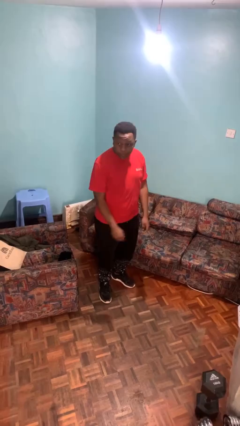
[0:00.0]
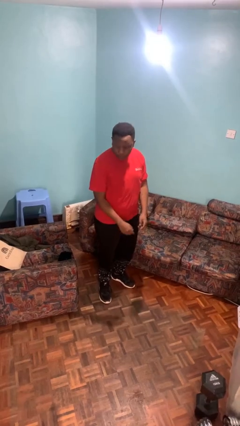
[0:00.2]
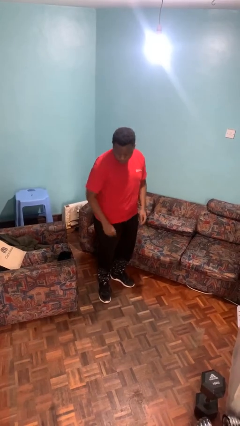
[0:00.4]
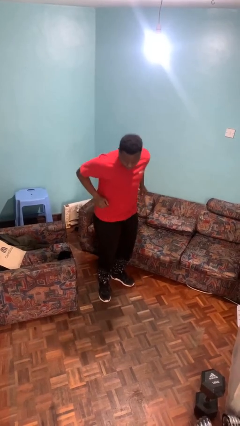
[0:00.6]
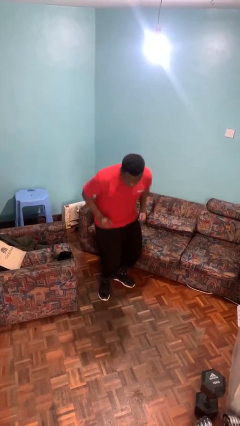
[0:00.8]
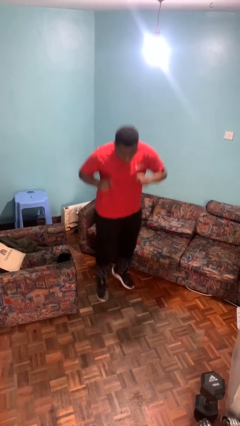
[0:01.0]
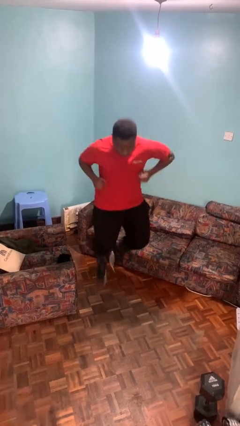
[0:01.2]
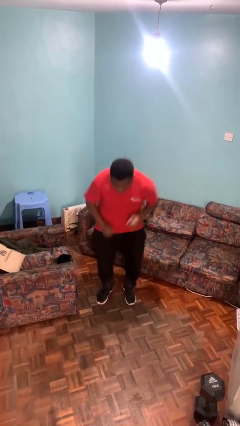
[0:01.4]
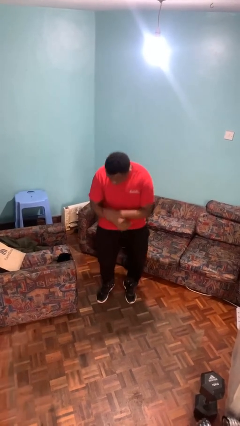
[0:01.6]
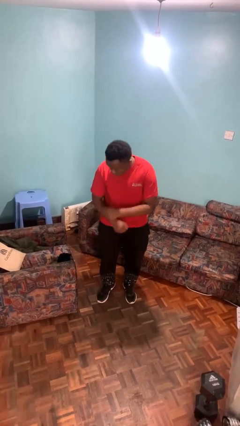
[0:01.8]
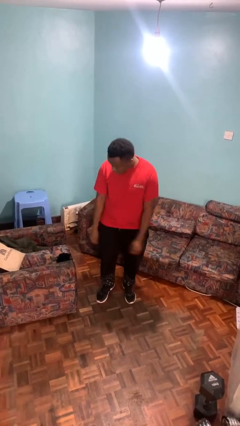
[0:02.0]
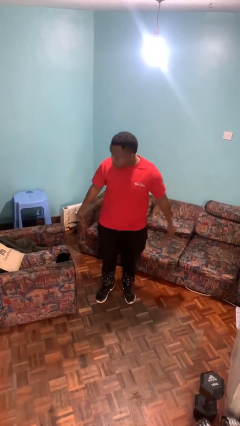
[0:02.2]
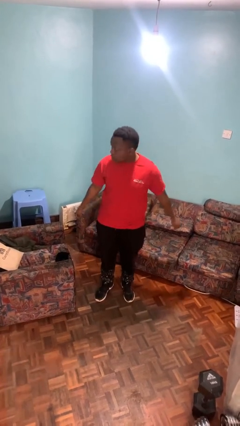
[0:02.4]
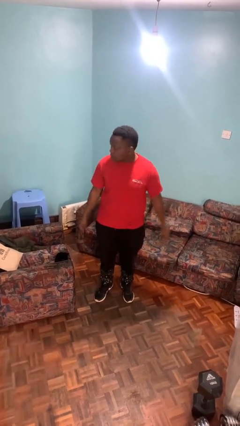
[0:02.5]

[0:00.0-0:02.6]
person jumps

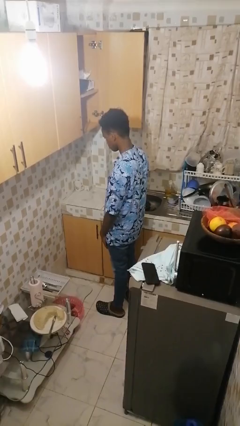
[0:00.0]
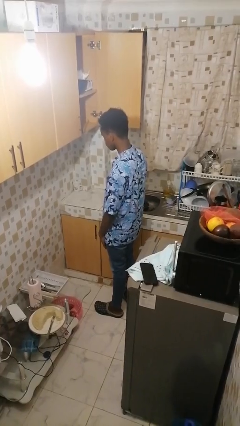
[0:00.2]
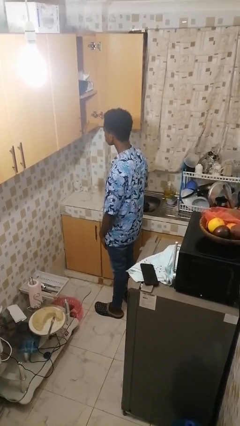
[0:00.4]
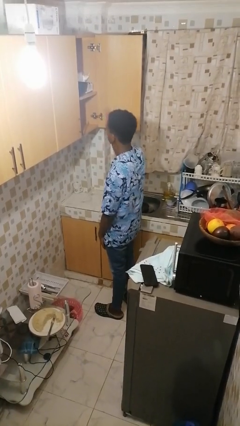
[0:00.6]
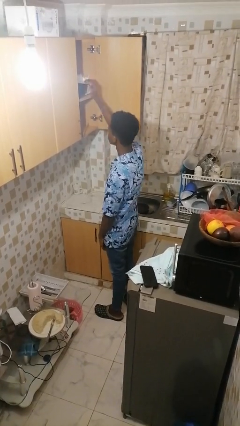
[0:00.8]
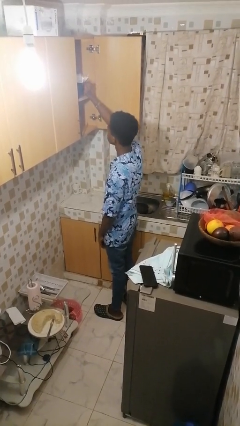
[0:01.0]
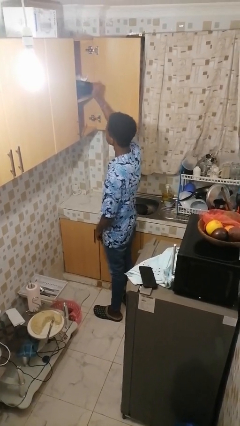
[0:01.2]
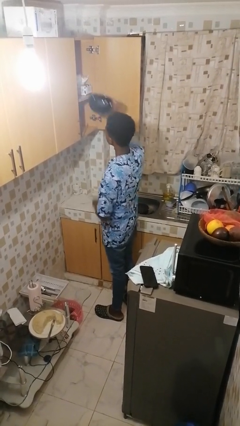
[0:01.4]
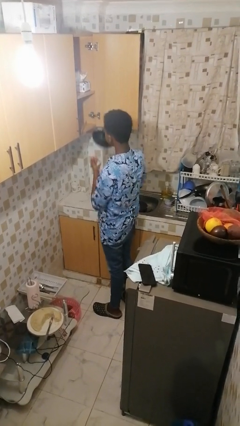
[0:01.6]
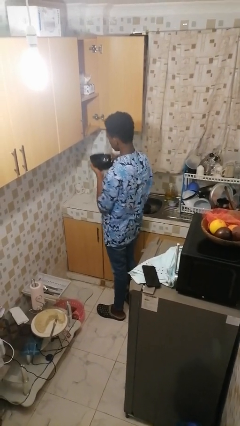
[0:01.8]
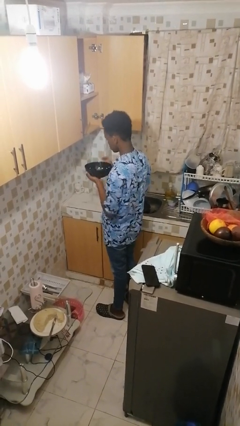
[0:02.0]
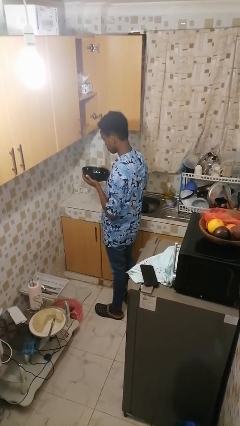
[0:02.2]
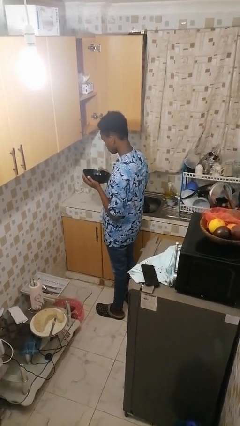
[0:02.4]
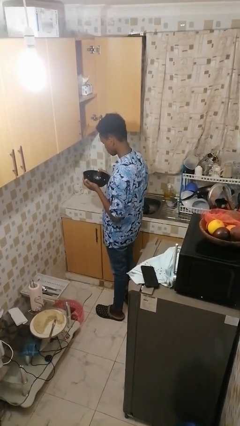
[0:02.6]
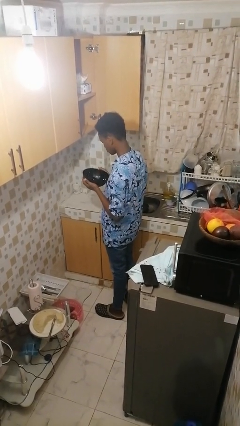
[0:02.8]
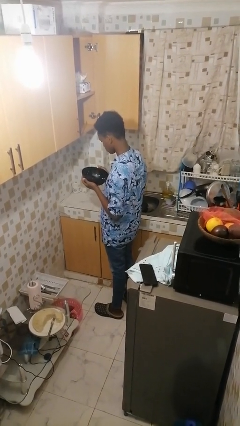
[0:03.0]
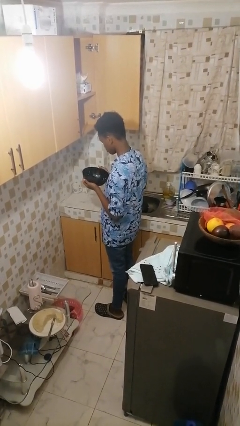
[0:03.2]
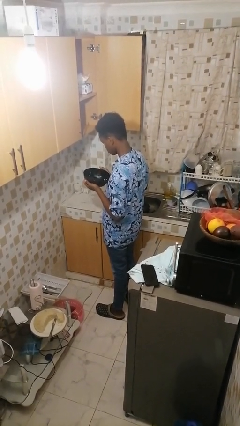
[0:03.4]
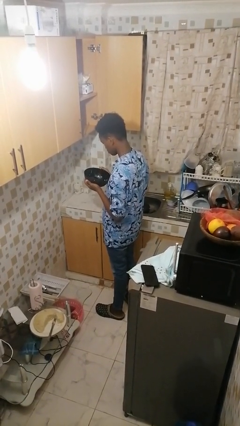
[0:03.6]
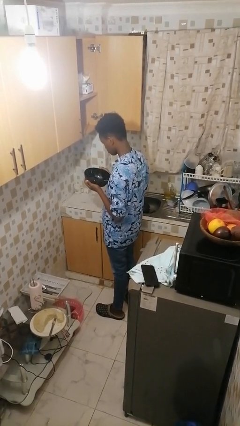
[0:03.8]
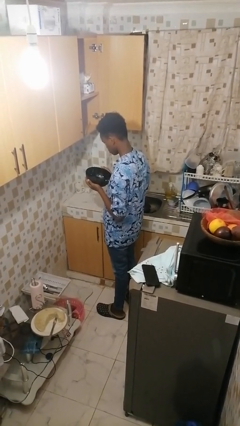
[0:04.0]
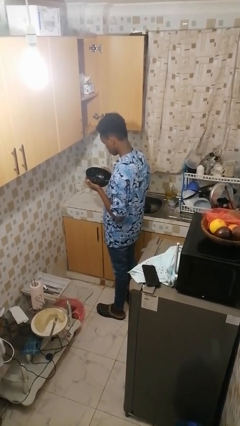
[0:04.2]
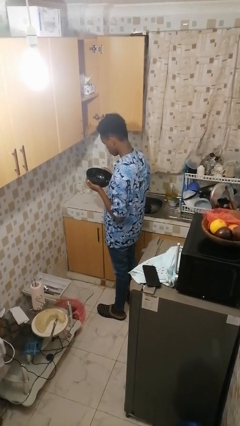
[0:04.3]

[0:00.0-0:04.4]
person picks up object from cabinet

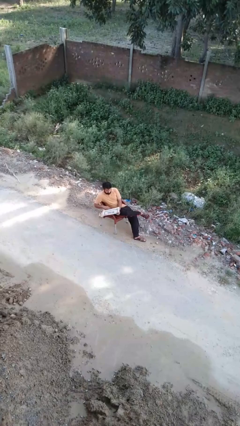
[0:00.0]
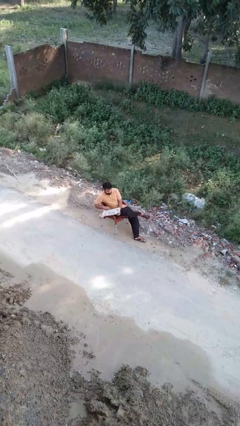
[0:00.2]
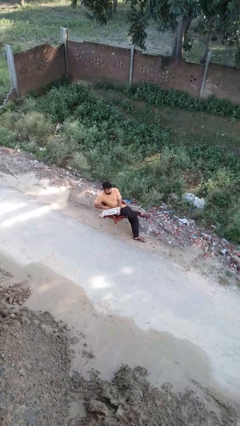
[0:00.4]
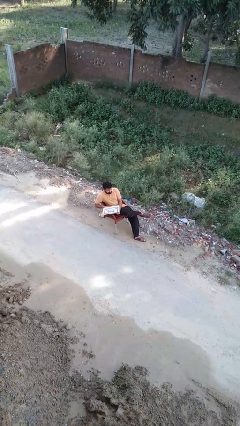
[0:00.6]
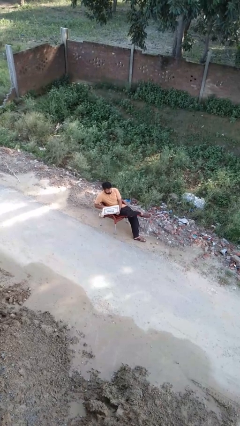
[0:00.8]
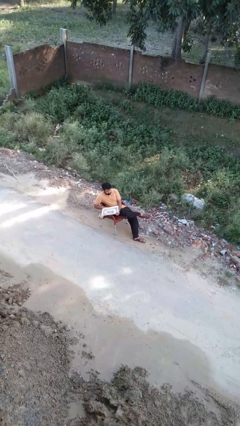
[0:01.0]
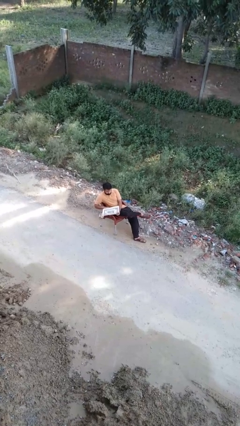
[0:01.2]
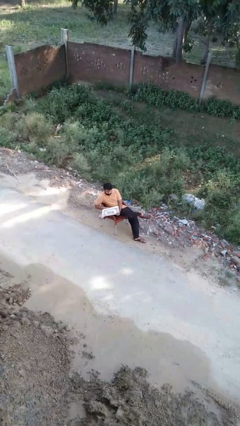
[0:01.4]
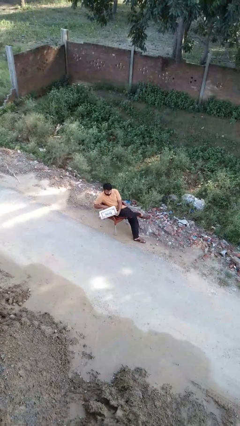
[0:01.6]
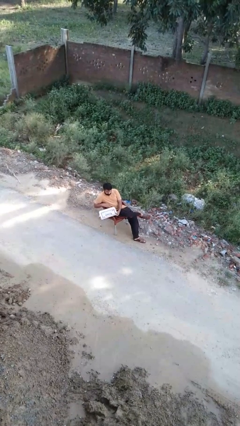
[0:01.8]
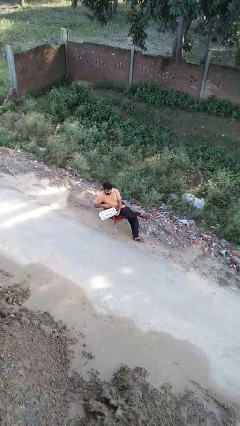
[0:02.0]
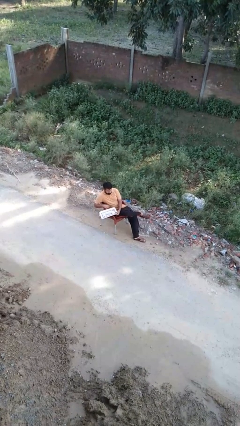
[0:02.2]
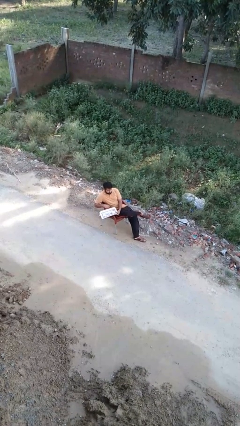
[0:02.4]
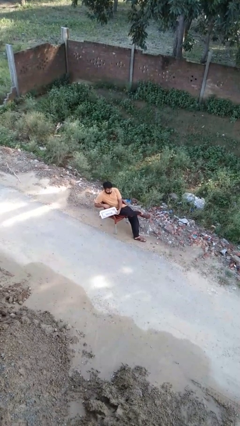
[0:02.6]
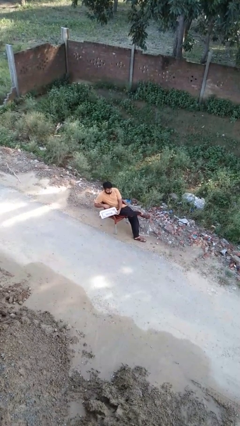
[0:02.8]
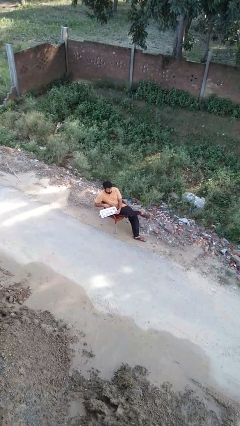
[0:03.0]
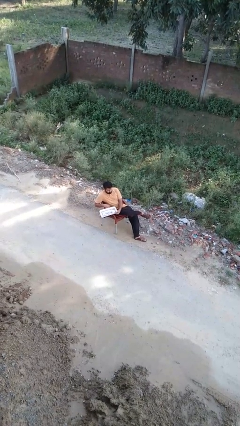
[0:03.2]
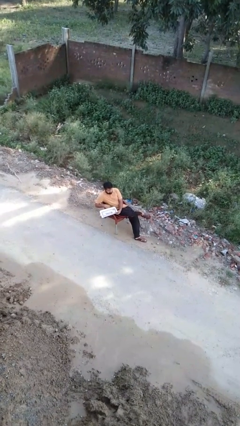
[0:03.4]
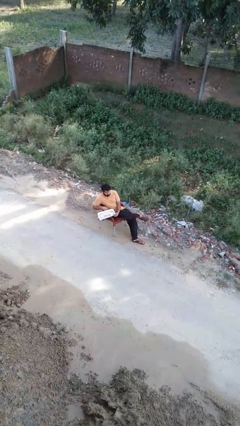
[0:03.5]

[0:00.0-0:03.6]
person closes laptop

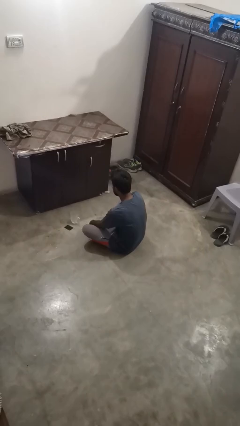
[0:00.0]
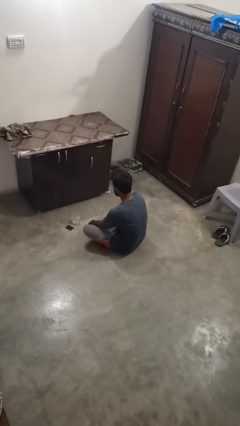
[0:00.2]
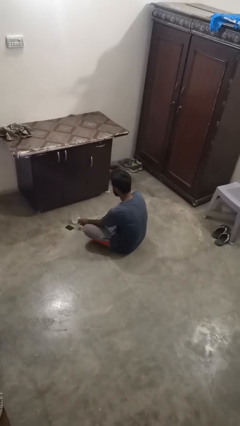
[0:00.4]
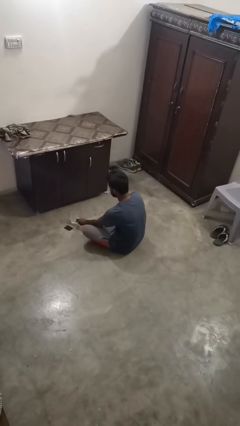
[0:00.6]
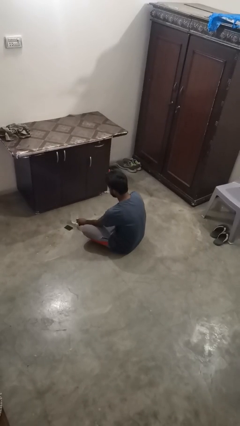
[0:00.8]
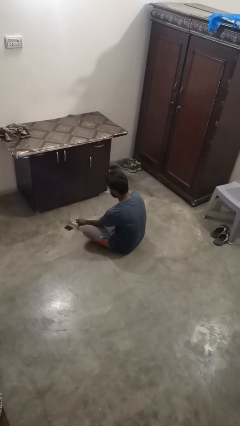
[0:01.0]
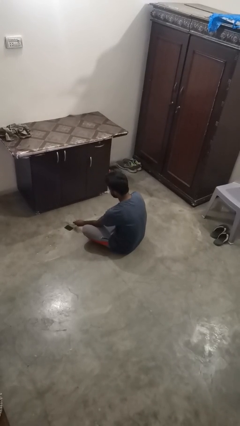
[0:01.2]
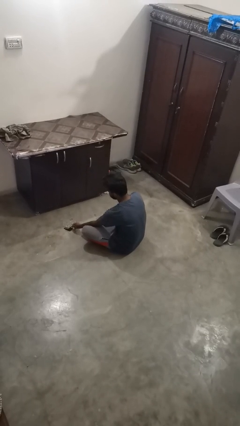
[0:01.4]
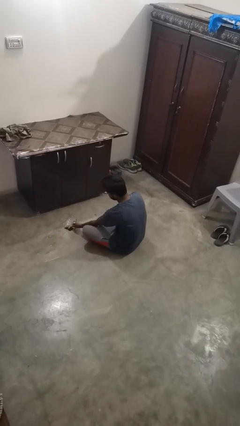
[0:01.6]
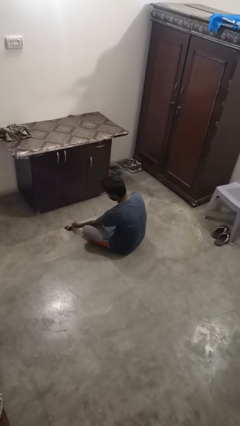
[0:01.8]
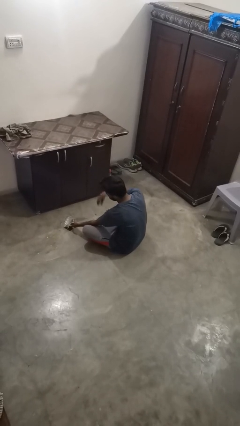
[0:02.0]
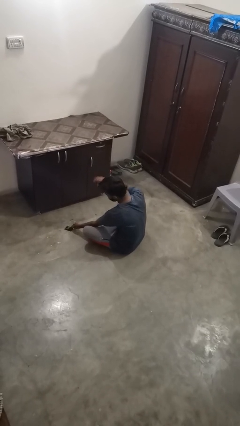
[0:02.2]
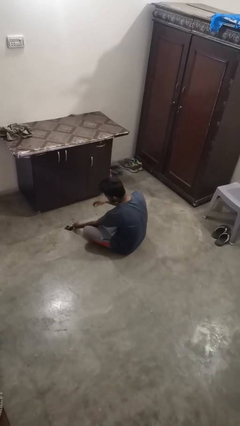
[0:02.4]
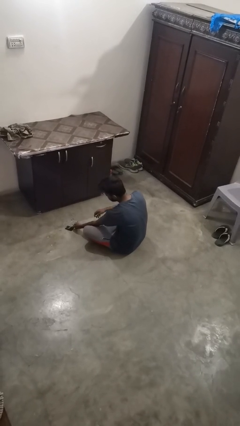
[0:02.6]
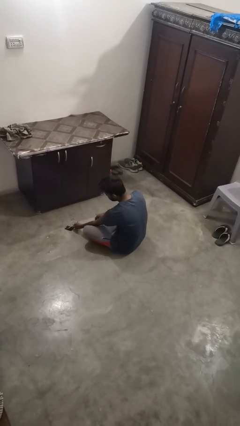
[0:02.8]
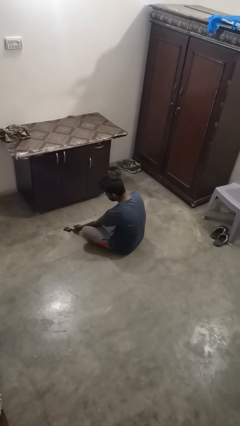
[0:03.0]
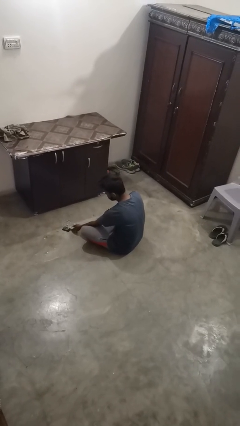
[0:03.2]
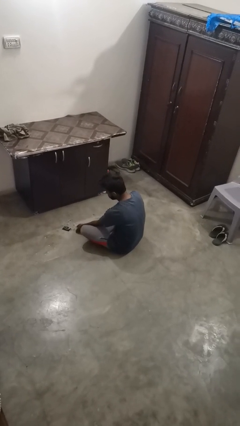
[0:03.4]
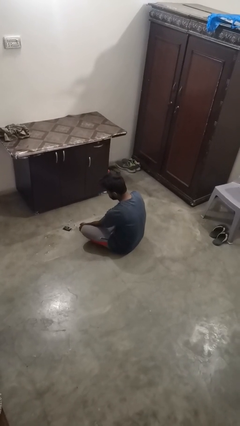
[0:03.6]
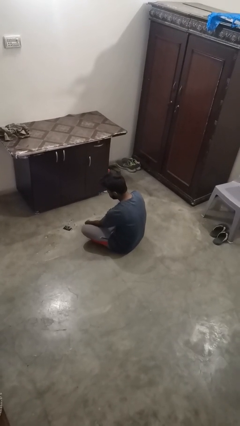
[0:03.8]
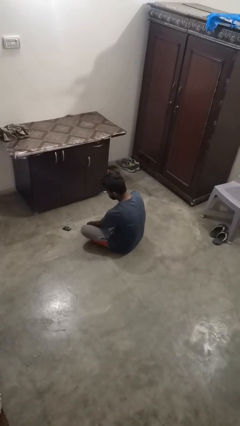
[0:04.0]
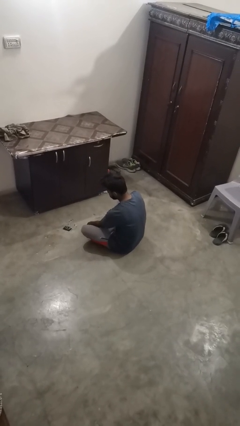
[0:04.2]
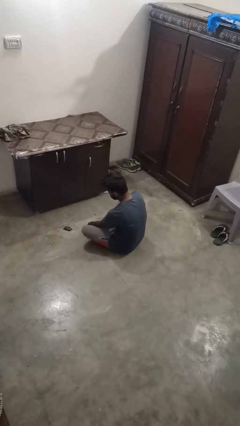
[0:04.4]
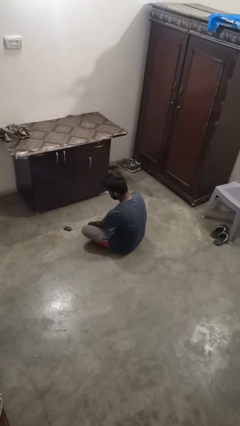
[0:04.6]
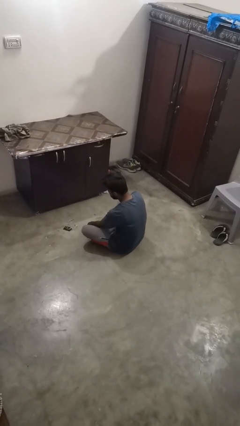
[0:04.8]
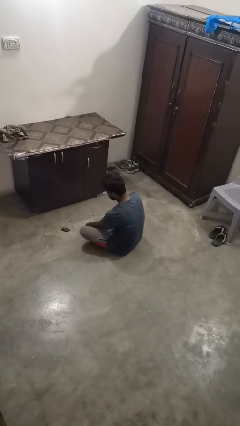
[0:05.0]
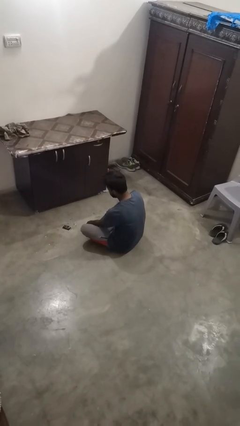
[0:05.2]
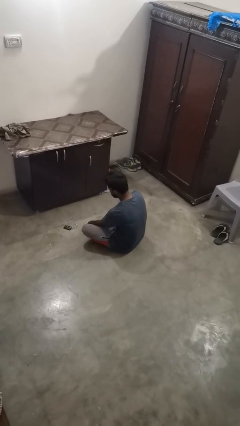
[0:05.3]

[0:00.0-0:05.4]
person spills on floor

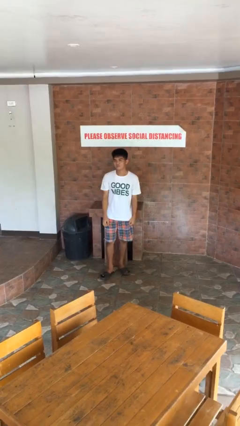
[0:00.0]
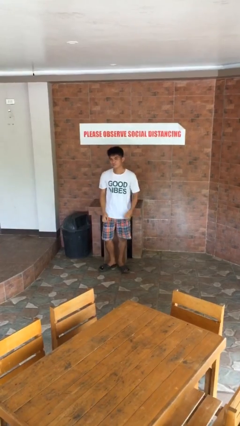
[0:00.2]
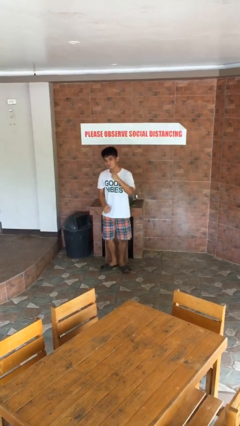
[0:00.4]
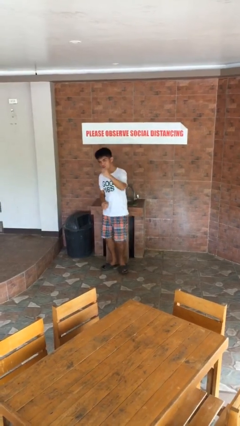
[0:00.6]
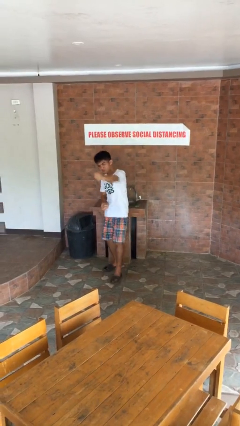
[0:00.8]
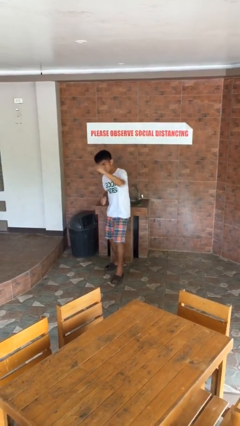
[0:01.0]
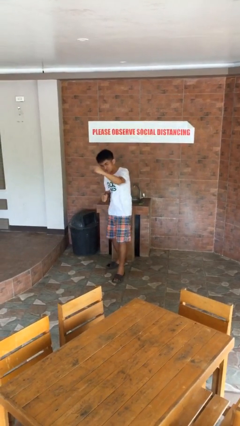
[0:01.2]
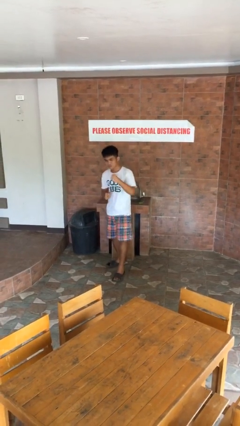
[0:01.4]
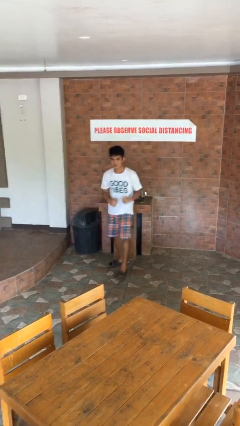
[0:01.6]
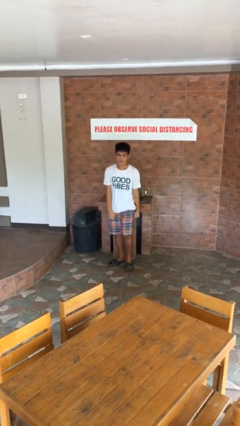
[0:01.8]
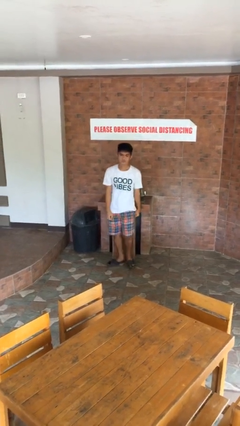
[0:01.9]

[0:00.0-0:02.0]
person punches
